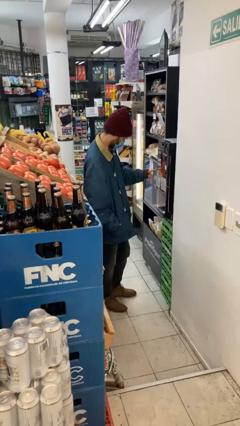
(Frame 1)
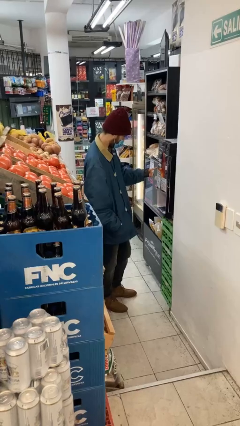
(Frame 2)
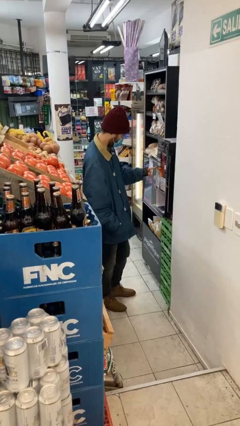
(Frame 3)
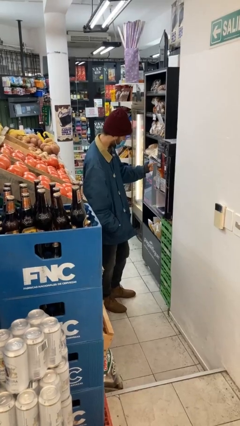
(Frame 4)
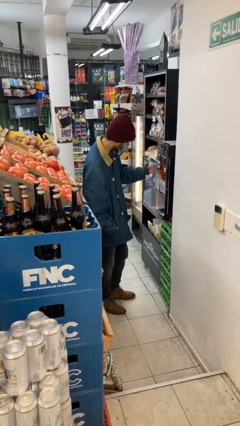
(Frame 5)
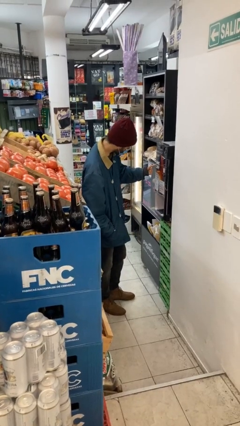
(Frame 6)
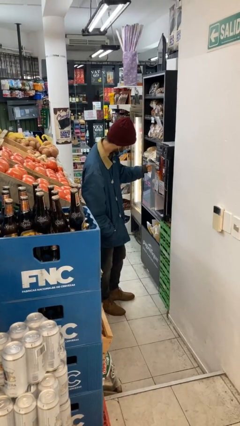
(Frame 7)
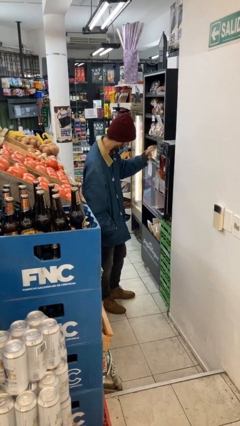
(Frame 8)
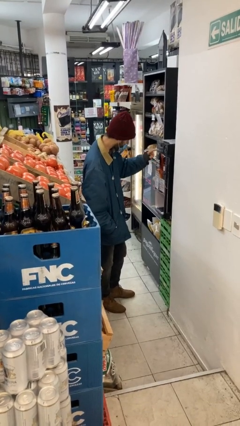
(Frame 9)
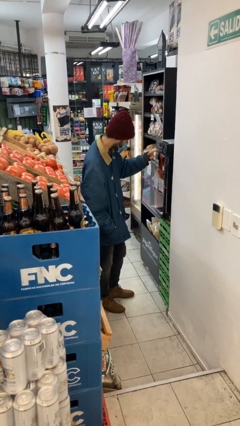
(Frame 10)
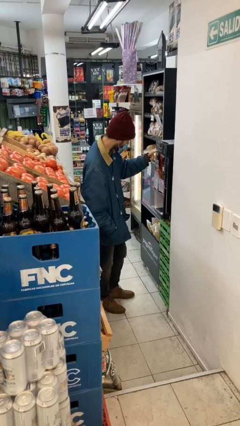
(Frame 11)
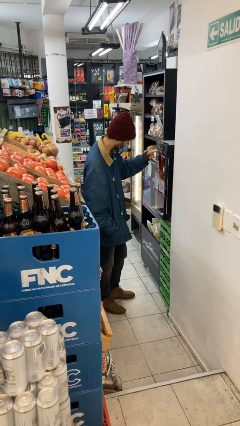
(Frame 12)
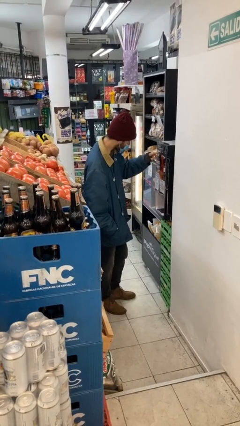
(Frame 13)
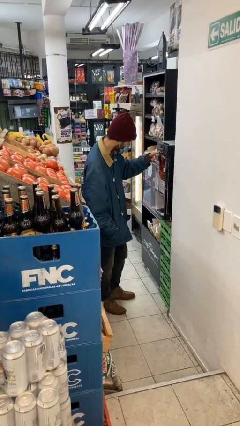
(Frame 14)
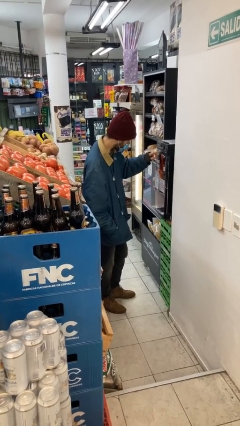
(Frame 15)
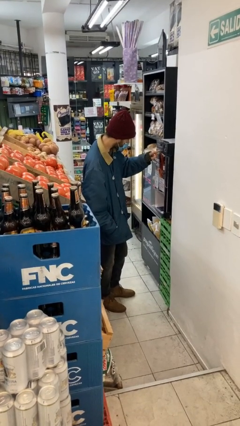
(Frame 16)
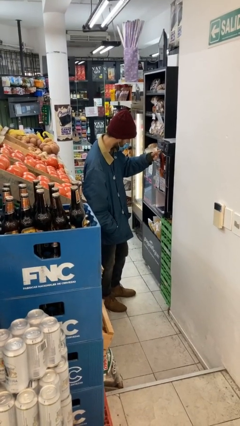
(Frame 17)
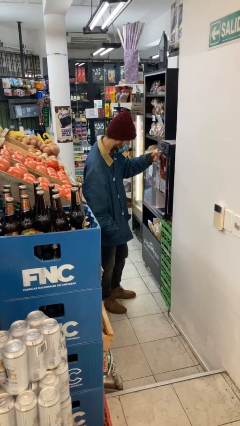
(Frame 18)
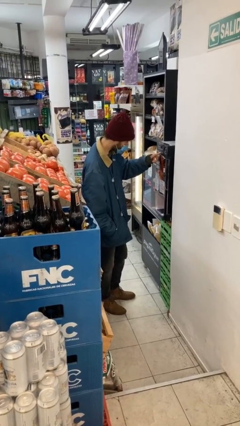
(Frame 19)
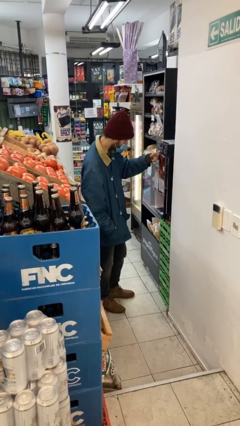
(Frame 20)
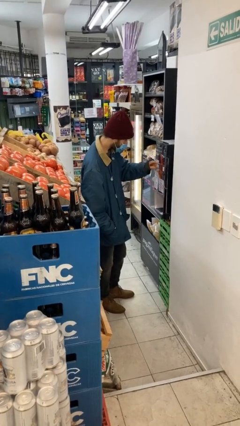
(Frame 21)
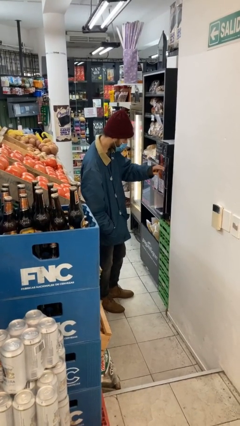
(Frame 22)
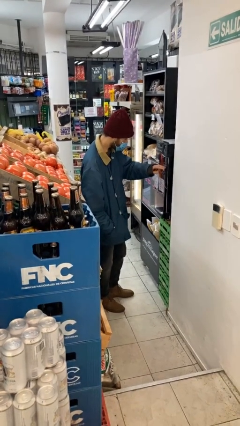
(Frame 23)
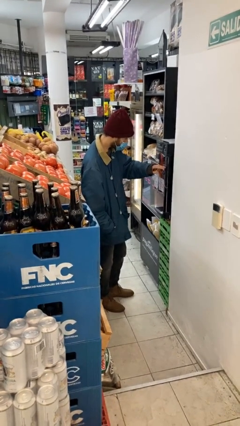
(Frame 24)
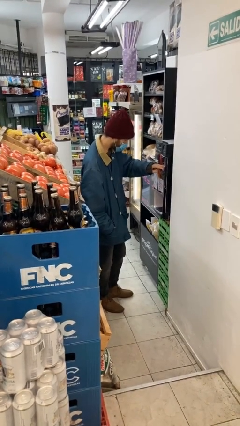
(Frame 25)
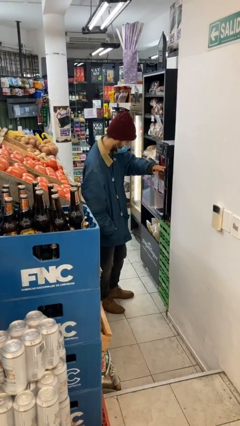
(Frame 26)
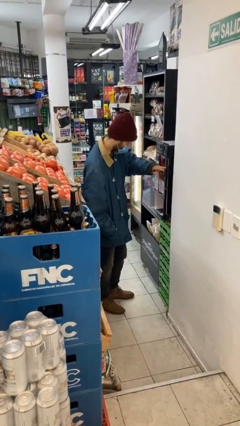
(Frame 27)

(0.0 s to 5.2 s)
person purchases from machine

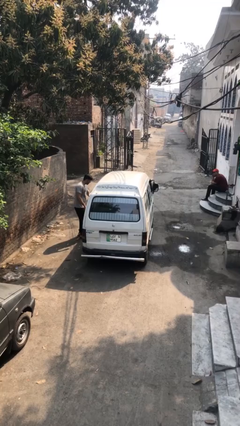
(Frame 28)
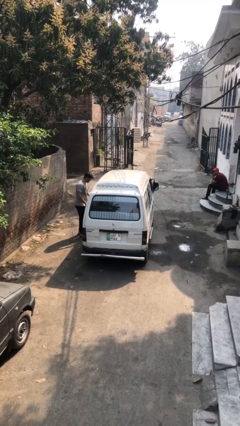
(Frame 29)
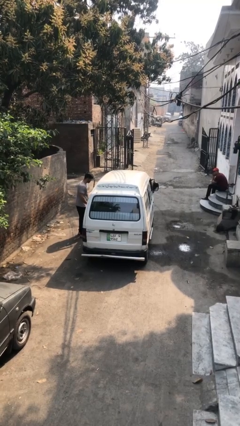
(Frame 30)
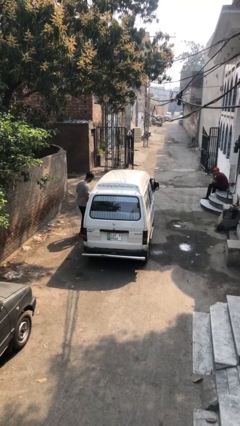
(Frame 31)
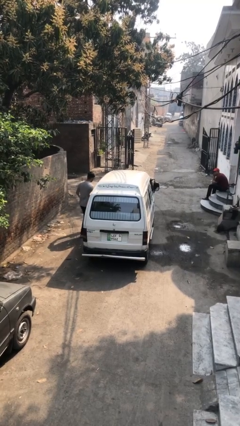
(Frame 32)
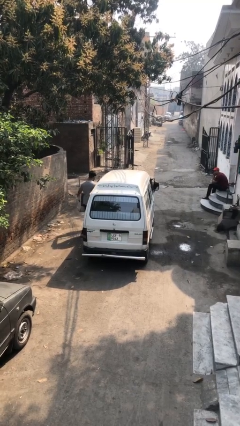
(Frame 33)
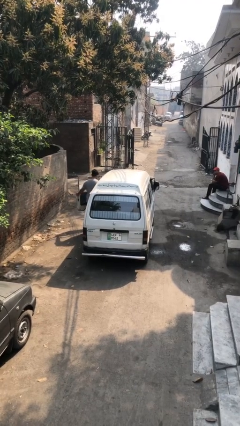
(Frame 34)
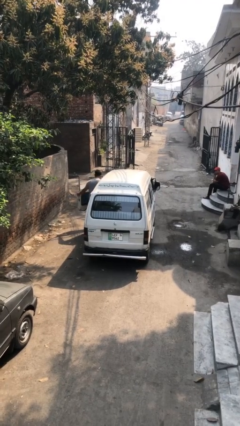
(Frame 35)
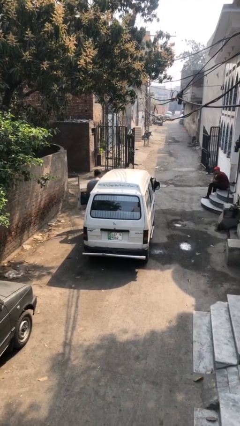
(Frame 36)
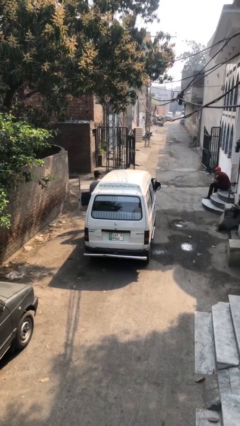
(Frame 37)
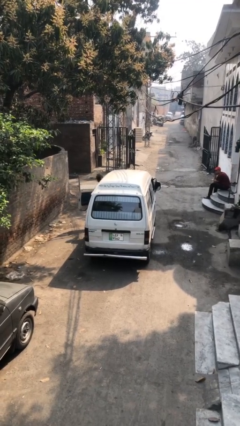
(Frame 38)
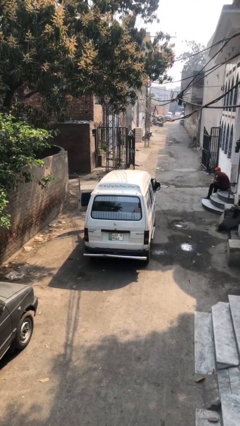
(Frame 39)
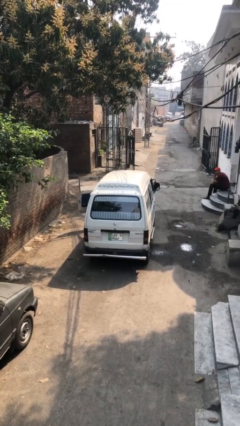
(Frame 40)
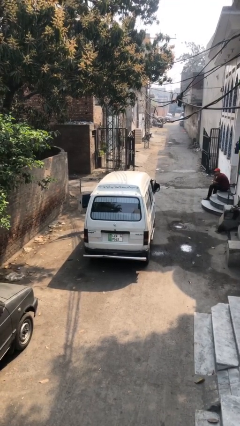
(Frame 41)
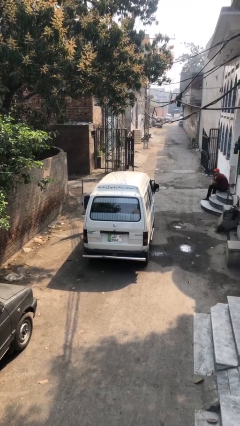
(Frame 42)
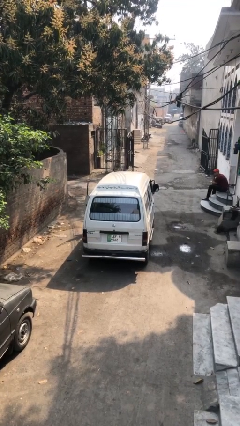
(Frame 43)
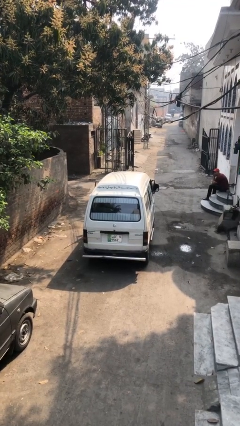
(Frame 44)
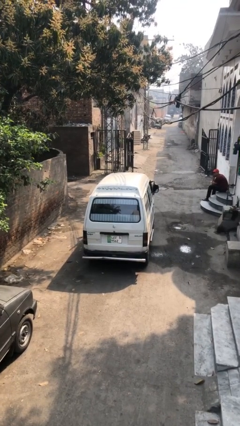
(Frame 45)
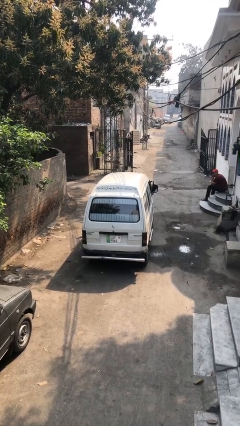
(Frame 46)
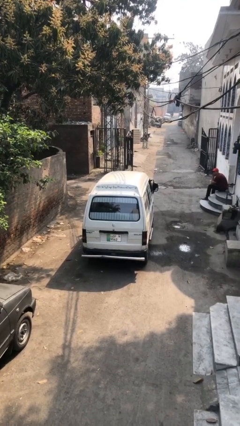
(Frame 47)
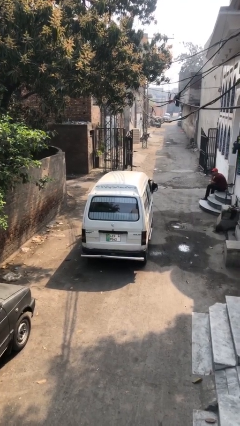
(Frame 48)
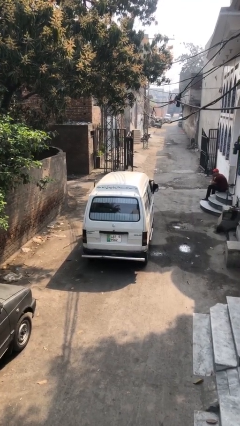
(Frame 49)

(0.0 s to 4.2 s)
car picks up person

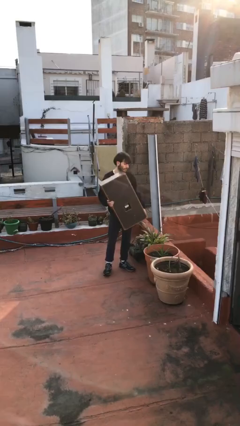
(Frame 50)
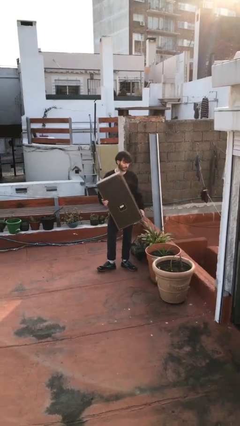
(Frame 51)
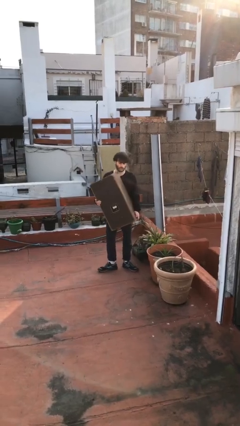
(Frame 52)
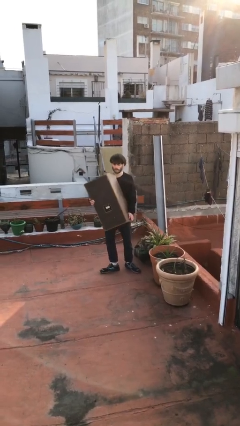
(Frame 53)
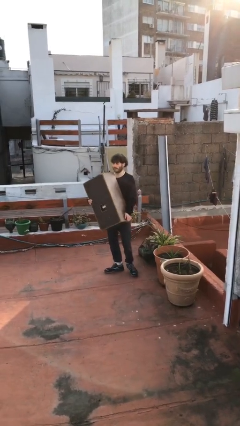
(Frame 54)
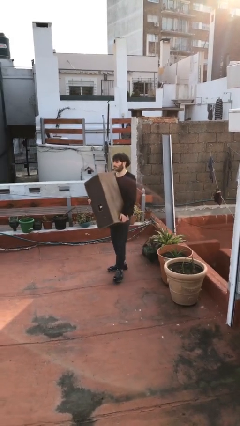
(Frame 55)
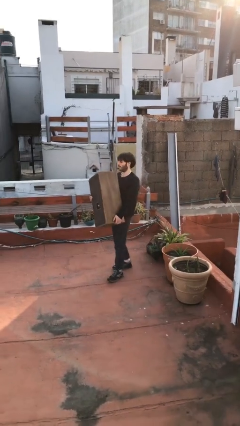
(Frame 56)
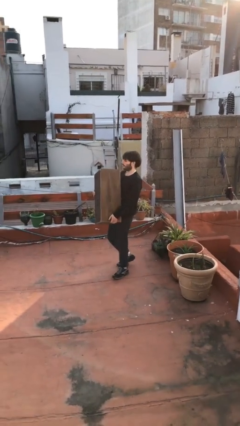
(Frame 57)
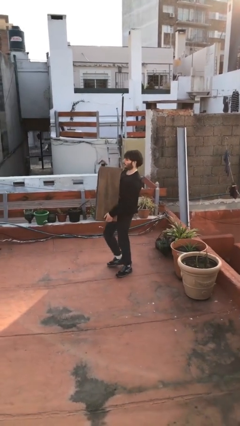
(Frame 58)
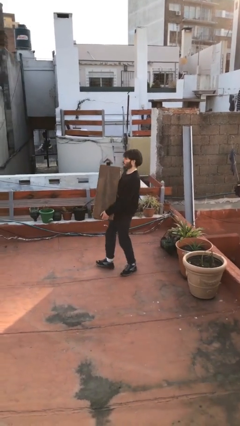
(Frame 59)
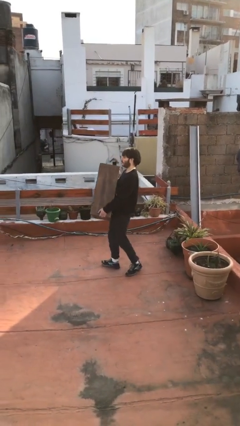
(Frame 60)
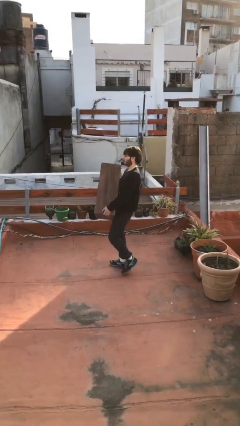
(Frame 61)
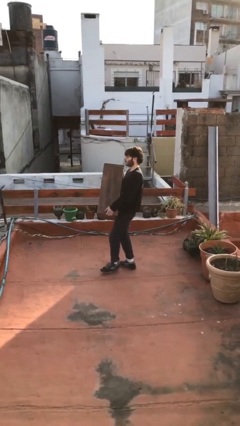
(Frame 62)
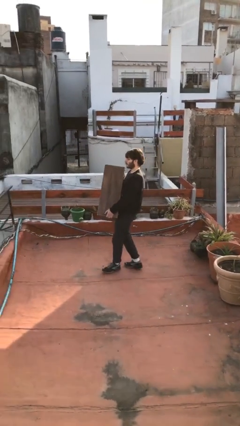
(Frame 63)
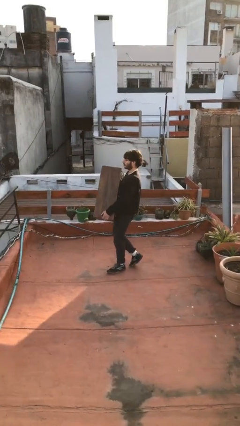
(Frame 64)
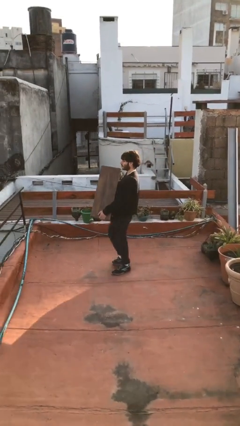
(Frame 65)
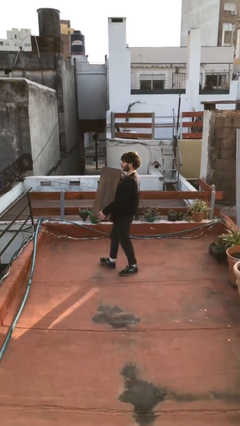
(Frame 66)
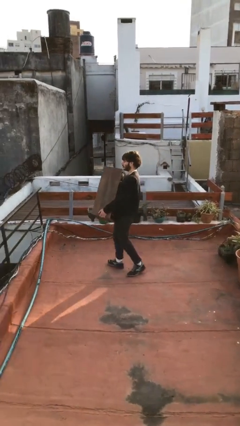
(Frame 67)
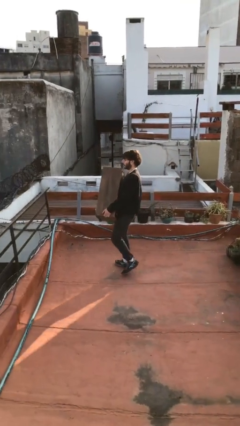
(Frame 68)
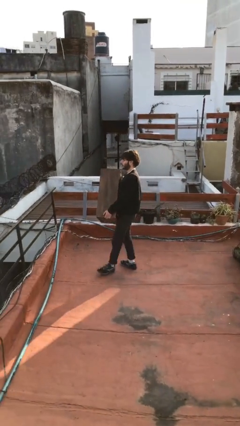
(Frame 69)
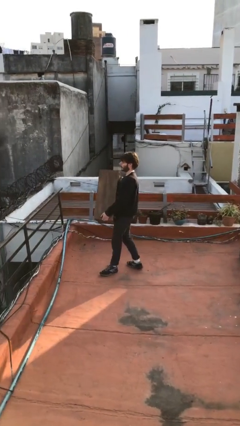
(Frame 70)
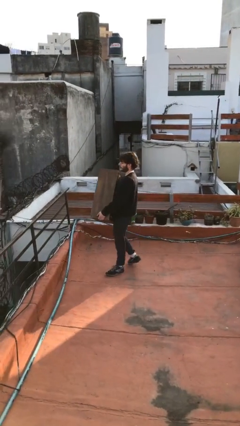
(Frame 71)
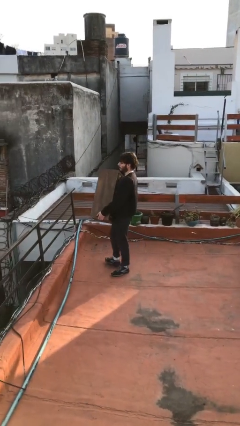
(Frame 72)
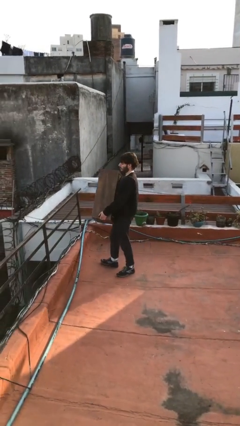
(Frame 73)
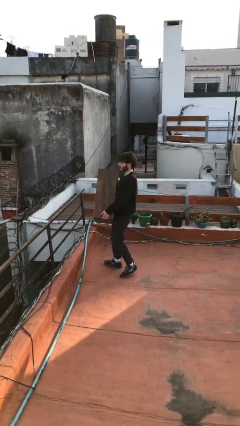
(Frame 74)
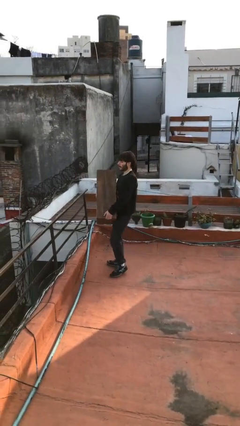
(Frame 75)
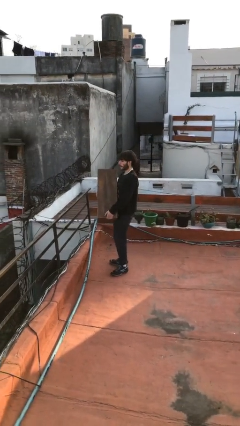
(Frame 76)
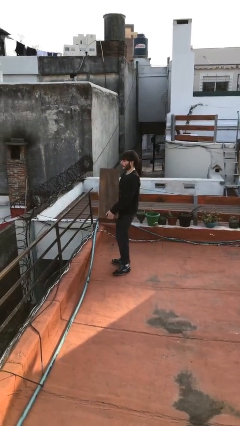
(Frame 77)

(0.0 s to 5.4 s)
person carries furniture

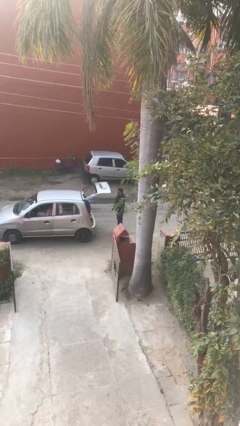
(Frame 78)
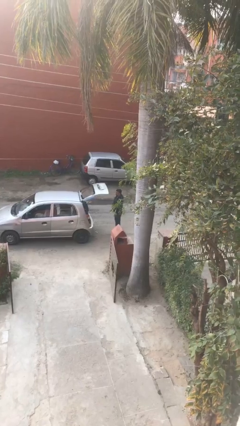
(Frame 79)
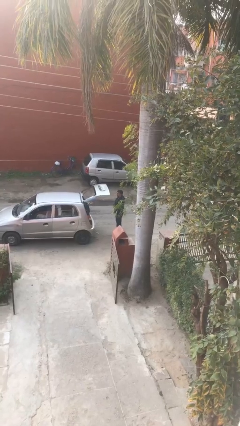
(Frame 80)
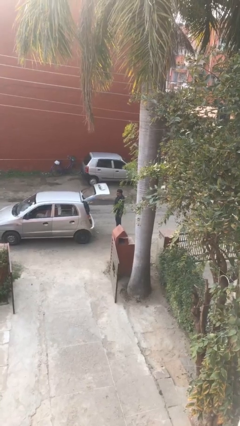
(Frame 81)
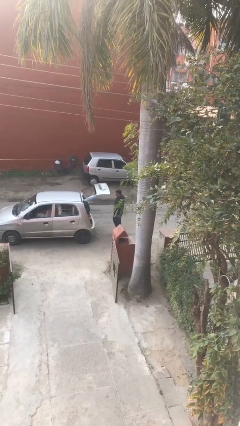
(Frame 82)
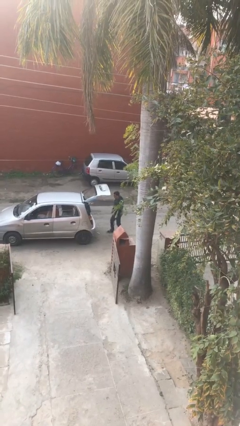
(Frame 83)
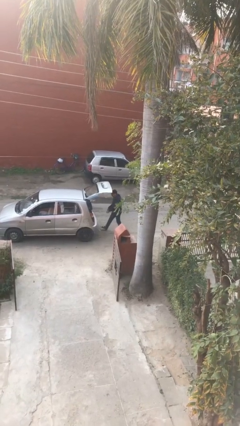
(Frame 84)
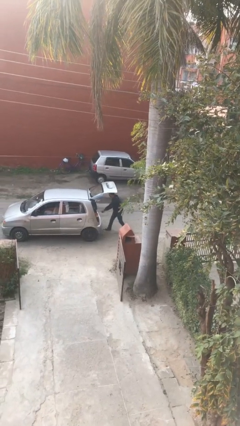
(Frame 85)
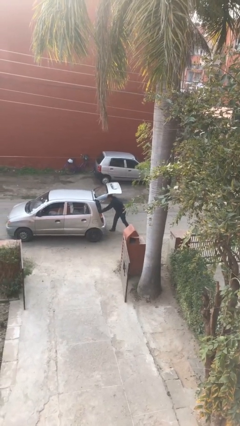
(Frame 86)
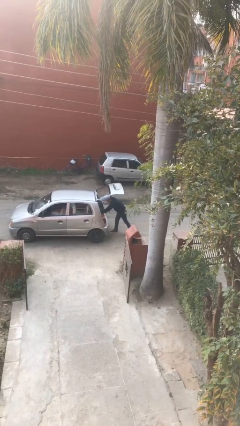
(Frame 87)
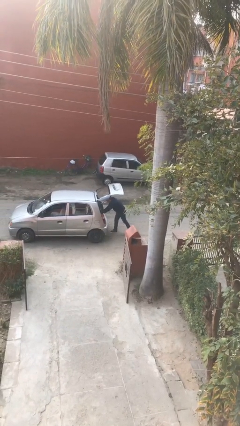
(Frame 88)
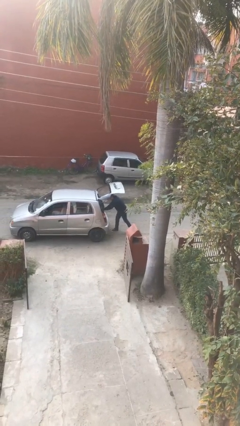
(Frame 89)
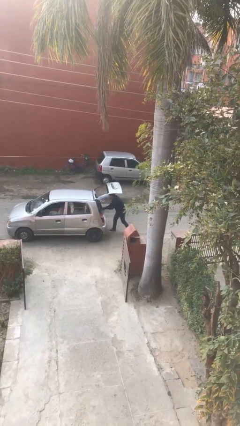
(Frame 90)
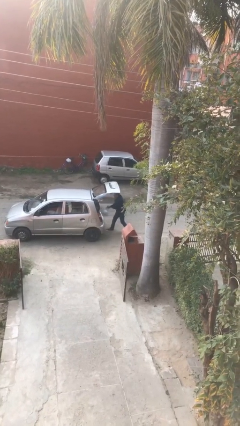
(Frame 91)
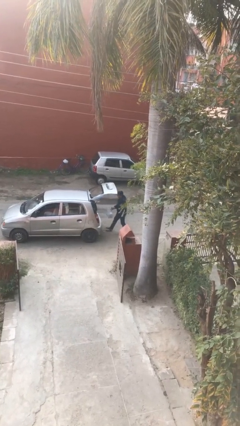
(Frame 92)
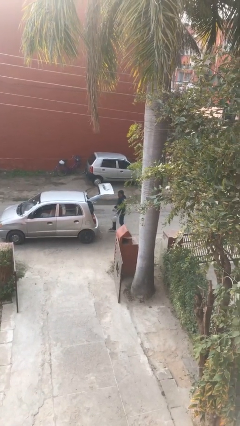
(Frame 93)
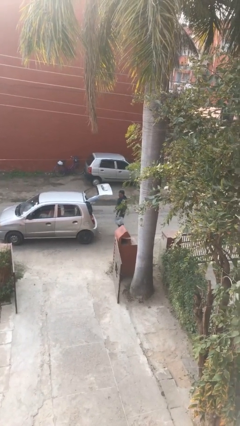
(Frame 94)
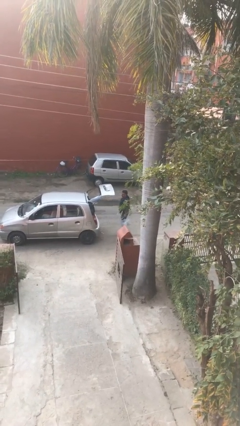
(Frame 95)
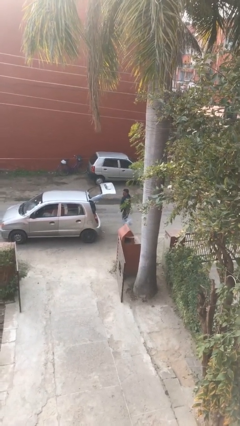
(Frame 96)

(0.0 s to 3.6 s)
person unloads car
